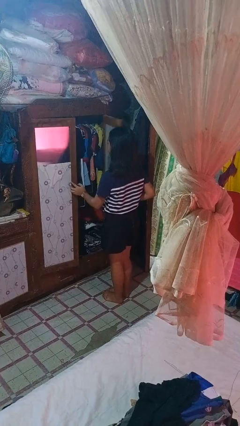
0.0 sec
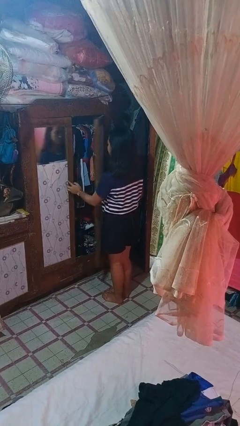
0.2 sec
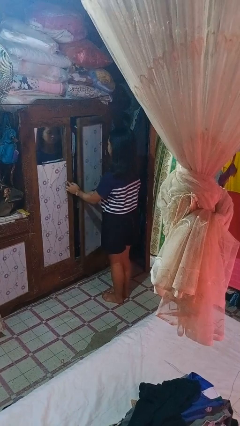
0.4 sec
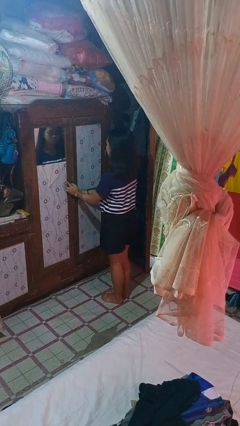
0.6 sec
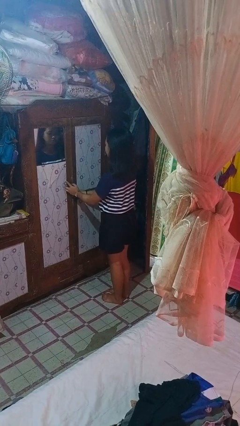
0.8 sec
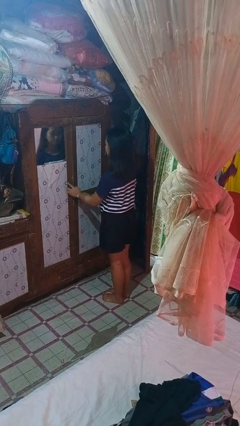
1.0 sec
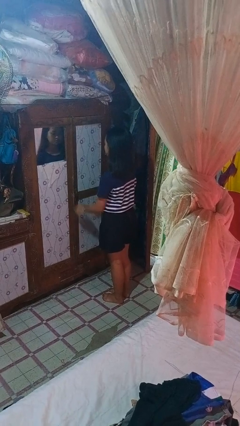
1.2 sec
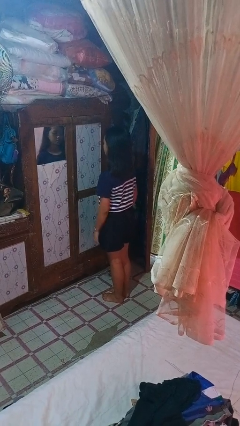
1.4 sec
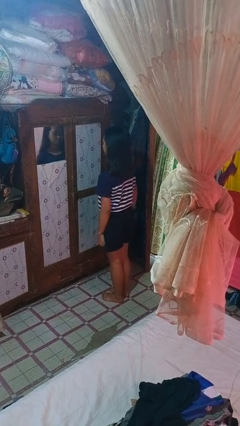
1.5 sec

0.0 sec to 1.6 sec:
person closes closet door

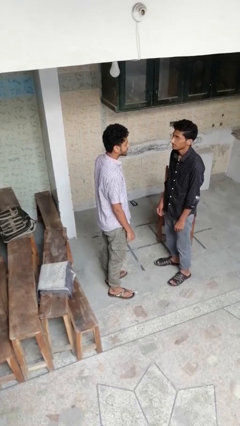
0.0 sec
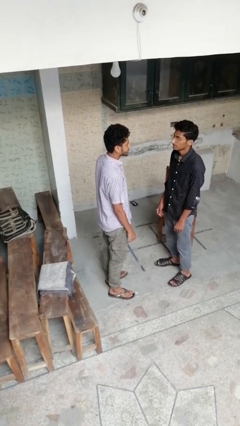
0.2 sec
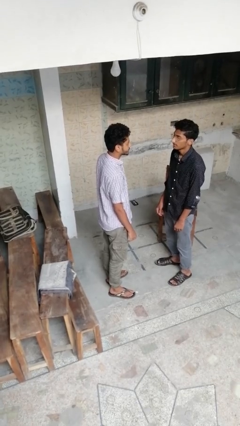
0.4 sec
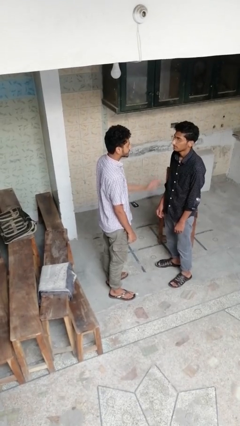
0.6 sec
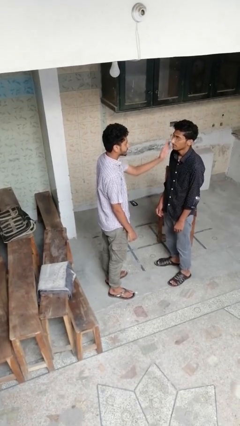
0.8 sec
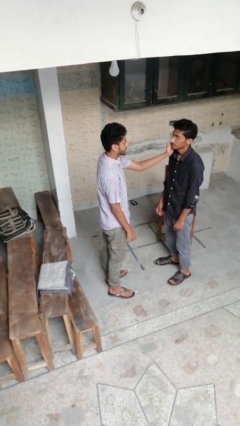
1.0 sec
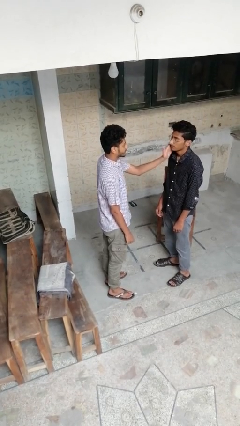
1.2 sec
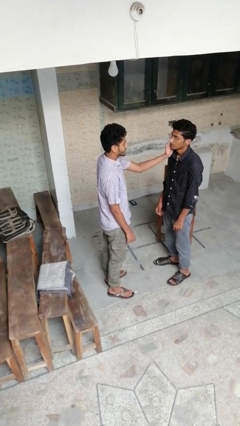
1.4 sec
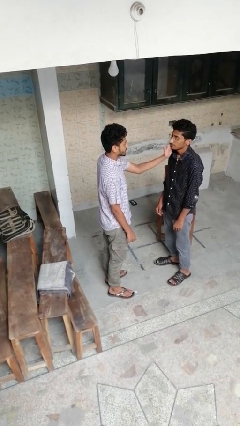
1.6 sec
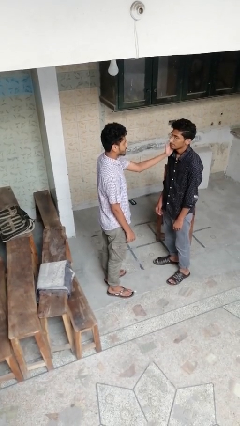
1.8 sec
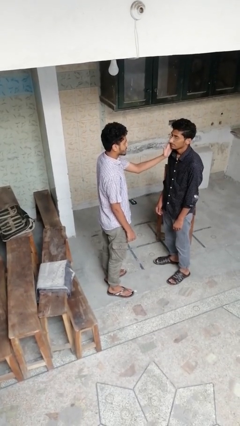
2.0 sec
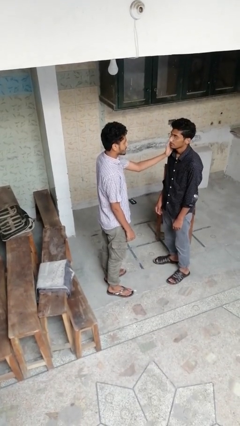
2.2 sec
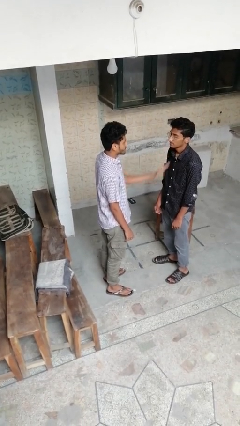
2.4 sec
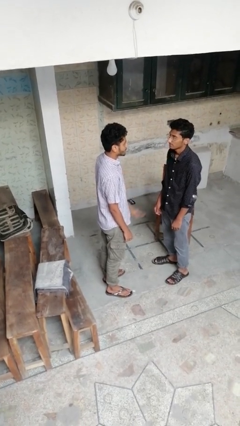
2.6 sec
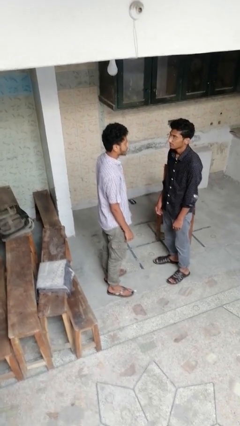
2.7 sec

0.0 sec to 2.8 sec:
person touches face of person

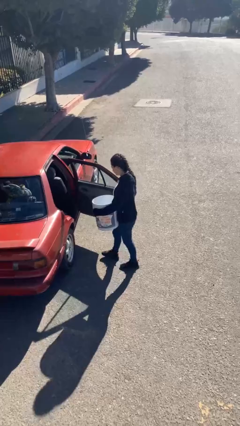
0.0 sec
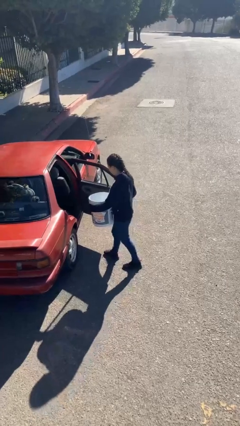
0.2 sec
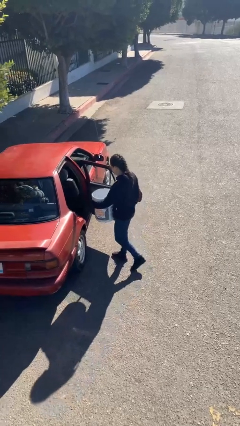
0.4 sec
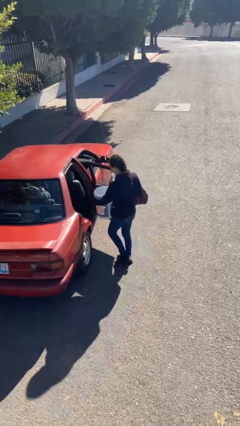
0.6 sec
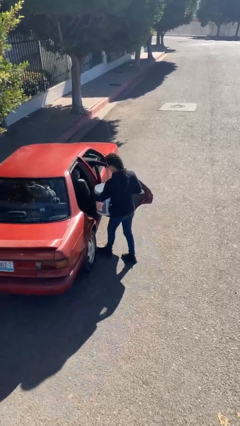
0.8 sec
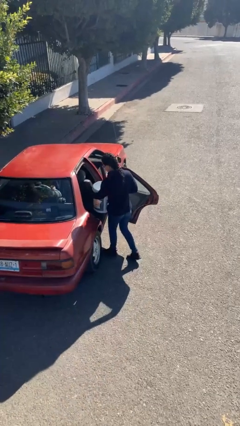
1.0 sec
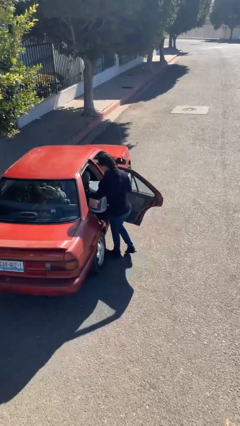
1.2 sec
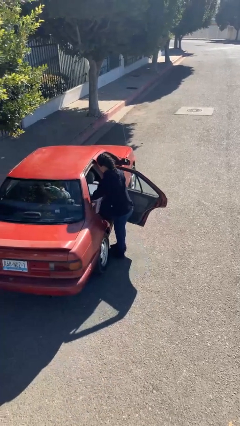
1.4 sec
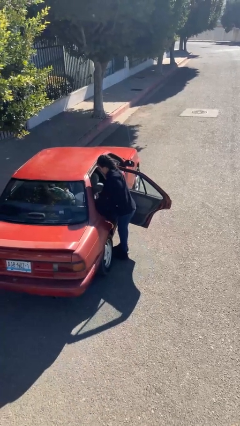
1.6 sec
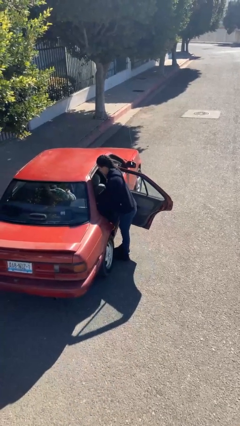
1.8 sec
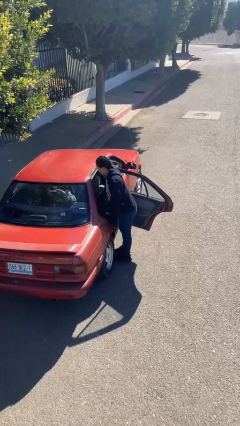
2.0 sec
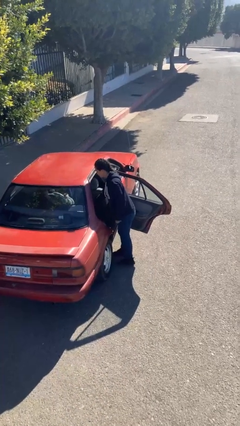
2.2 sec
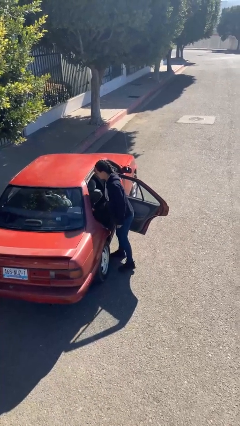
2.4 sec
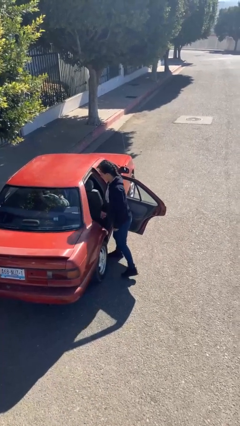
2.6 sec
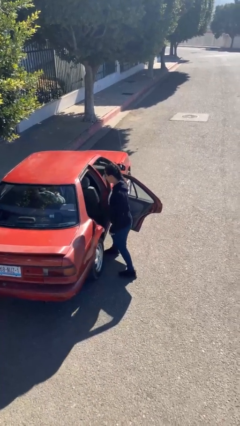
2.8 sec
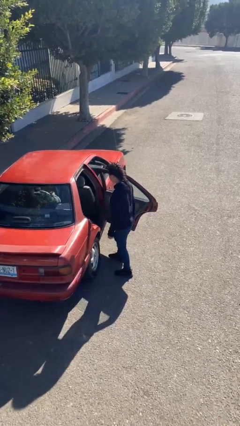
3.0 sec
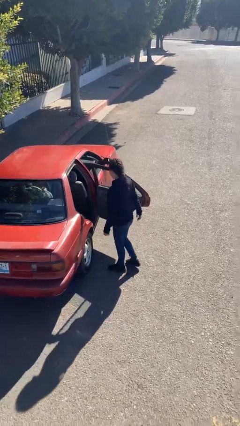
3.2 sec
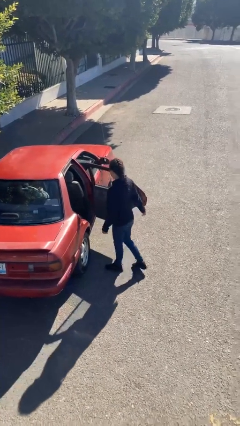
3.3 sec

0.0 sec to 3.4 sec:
person loads car

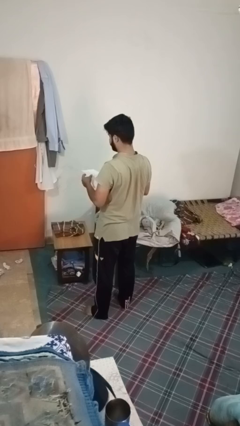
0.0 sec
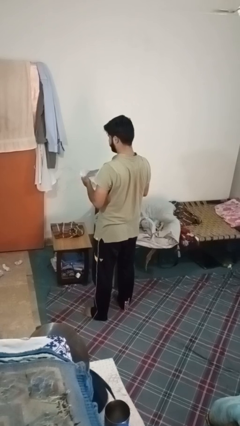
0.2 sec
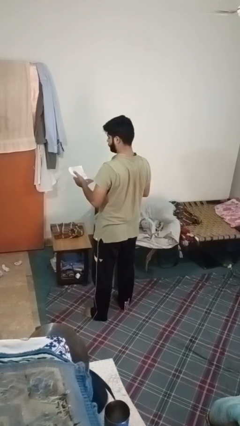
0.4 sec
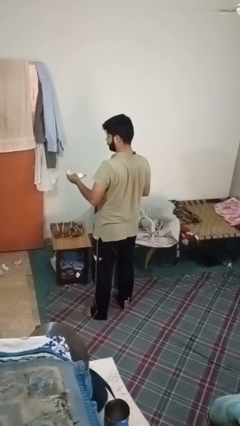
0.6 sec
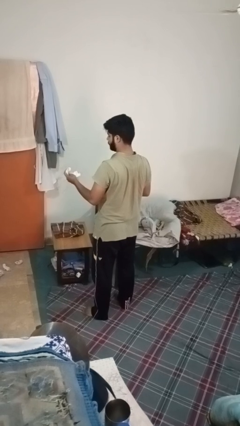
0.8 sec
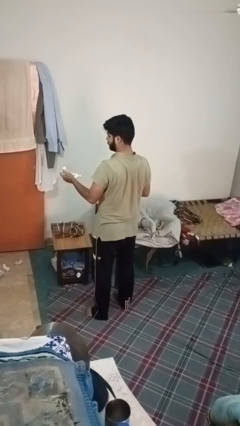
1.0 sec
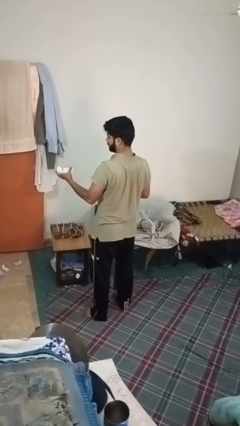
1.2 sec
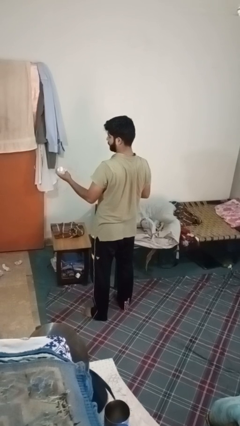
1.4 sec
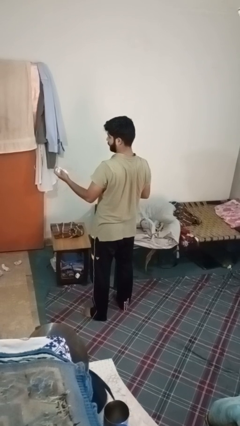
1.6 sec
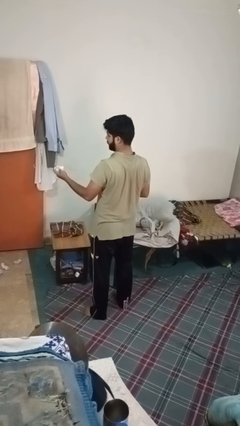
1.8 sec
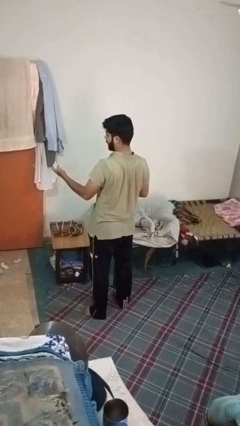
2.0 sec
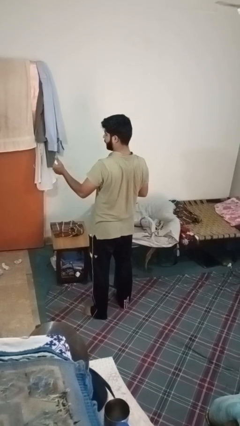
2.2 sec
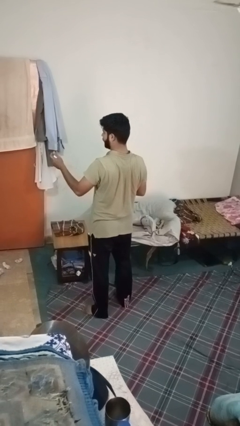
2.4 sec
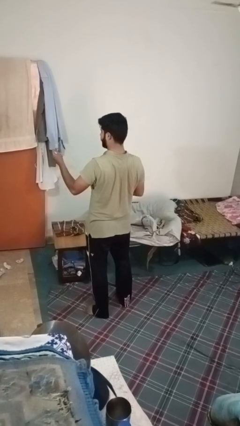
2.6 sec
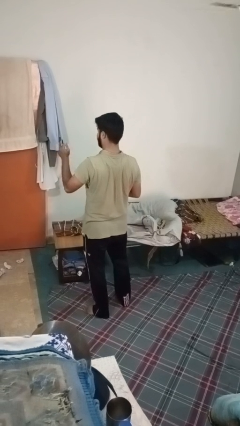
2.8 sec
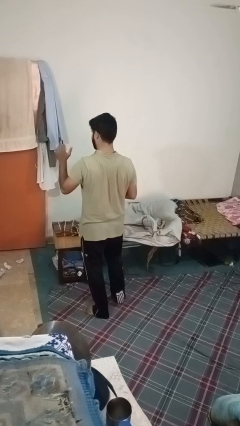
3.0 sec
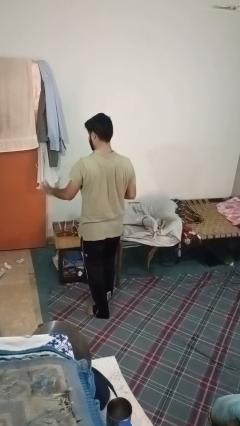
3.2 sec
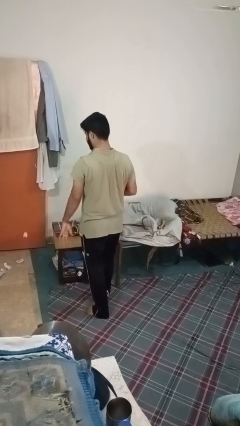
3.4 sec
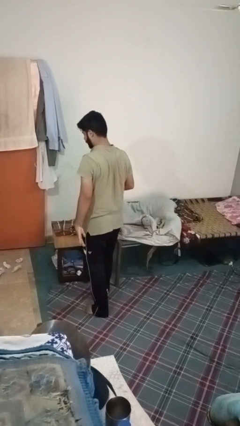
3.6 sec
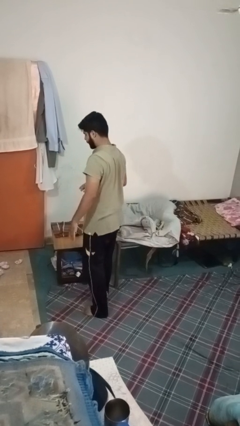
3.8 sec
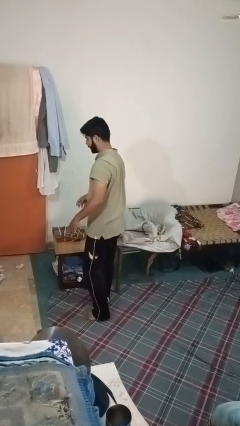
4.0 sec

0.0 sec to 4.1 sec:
person crumples paper

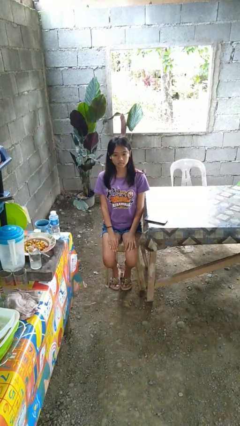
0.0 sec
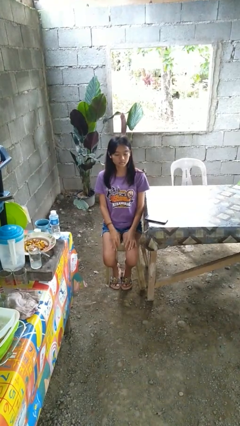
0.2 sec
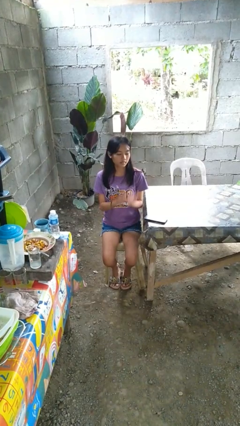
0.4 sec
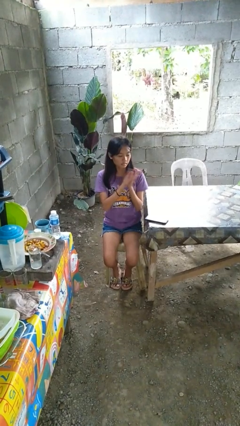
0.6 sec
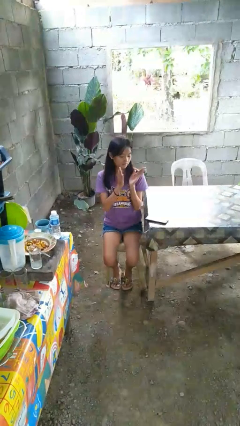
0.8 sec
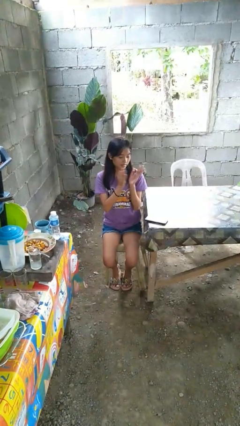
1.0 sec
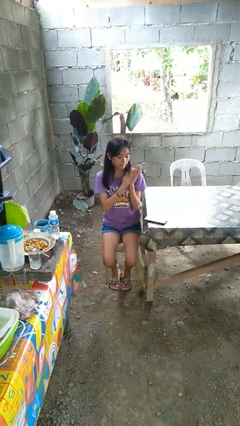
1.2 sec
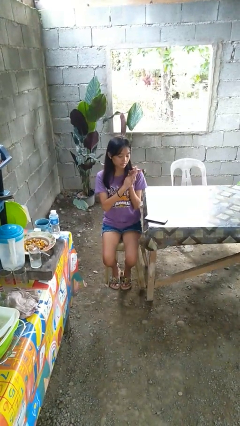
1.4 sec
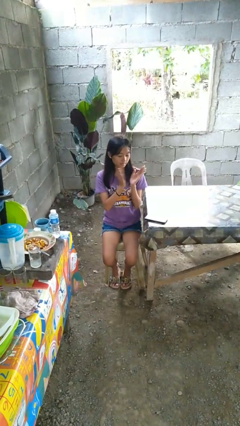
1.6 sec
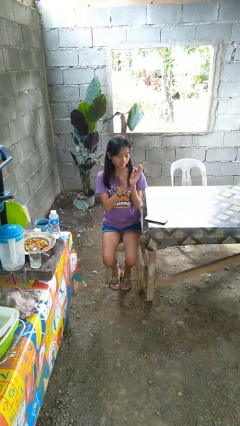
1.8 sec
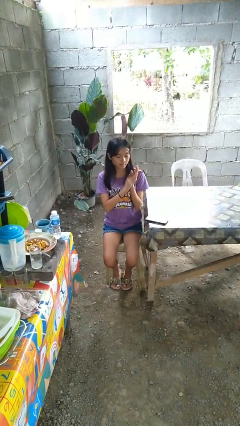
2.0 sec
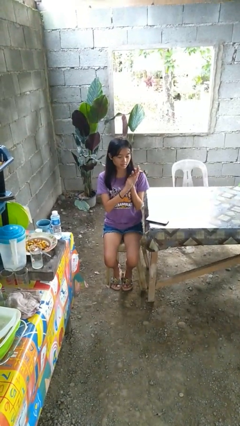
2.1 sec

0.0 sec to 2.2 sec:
person claps hands

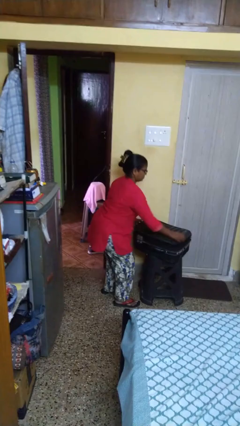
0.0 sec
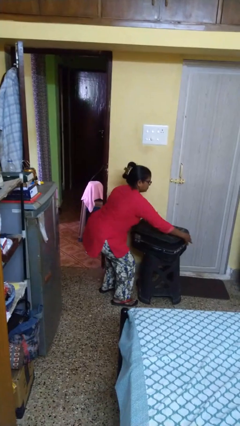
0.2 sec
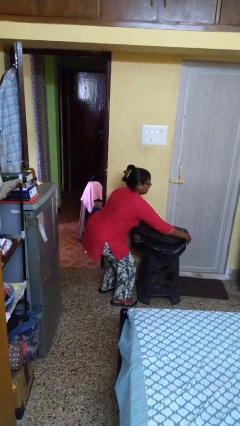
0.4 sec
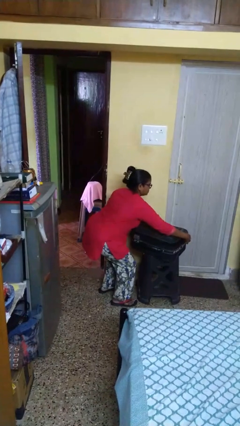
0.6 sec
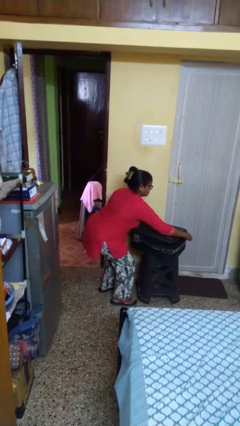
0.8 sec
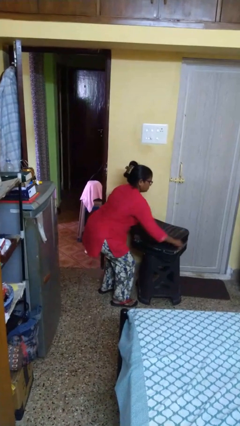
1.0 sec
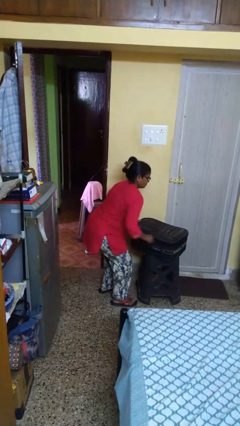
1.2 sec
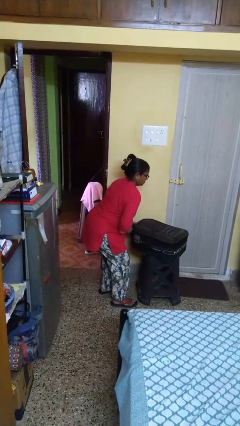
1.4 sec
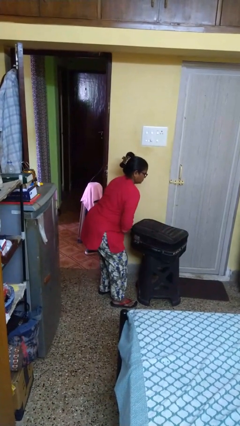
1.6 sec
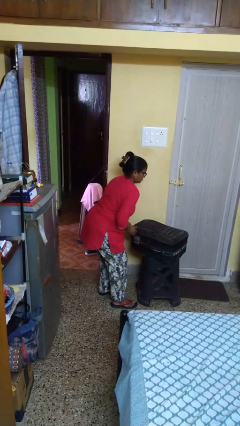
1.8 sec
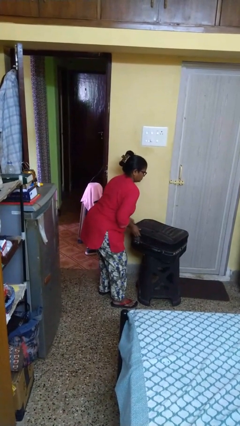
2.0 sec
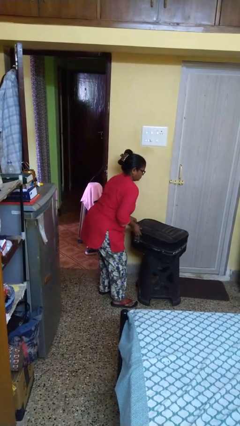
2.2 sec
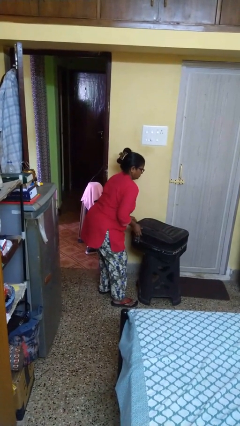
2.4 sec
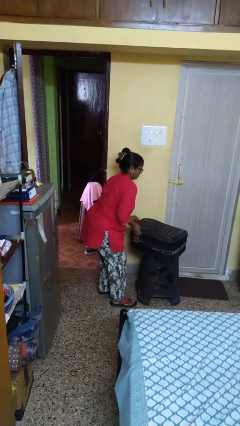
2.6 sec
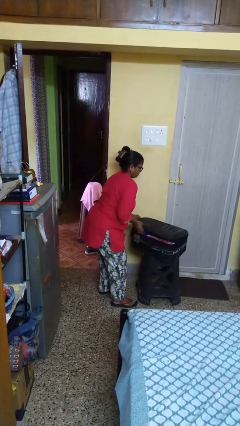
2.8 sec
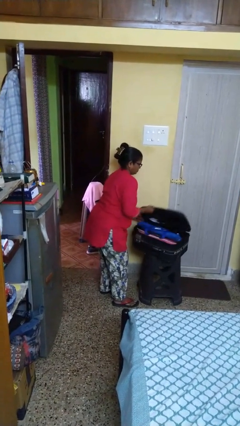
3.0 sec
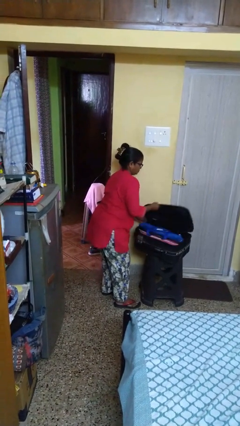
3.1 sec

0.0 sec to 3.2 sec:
person opens suitcase

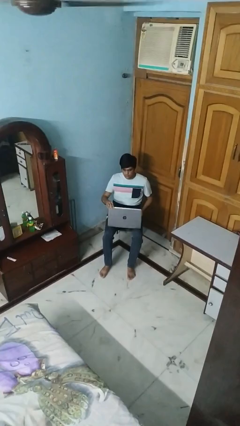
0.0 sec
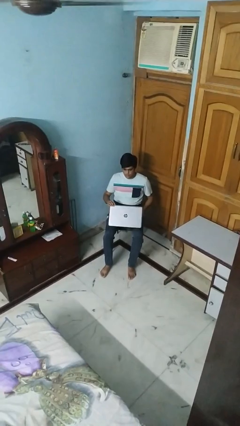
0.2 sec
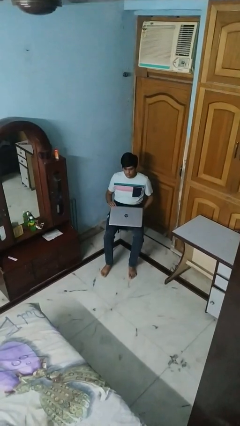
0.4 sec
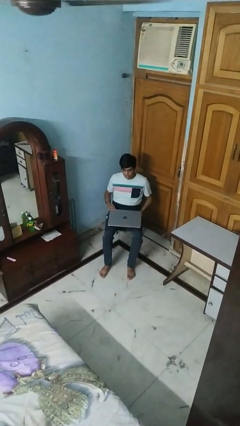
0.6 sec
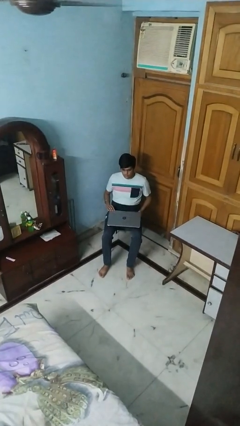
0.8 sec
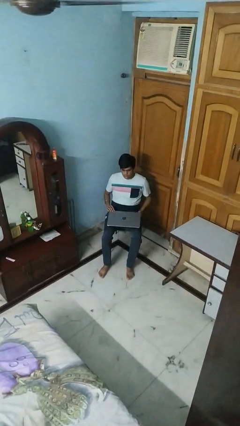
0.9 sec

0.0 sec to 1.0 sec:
person closes laptop
